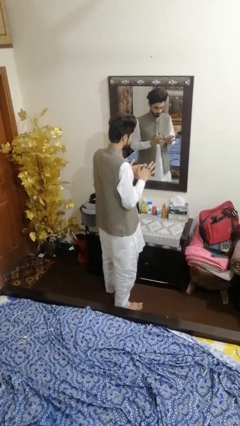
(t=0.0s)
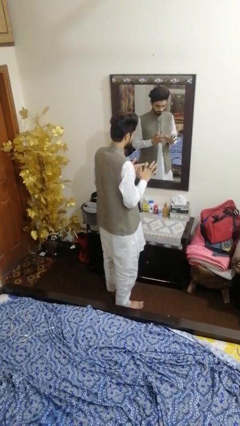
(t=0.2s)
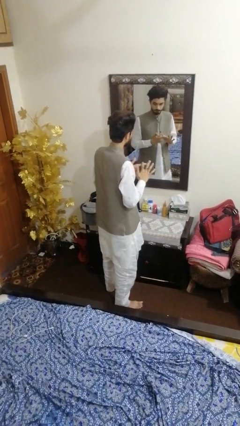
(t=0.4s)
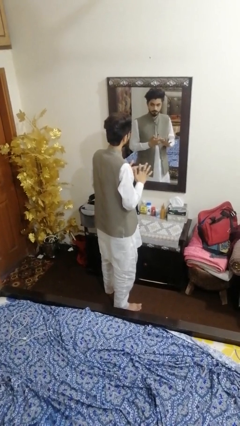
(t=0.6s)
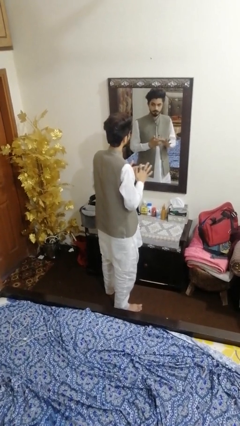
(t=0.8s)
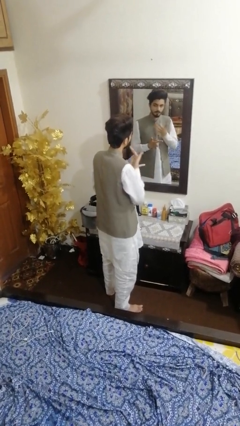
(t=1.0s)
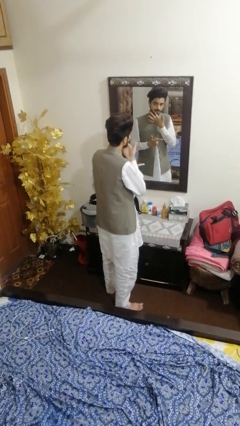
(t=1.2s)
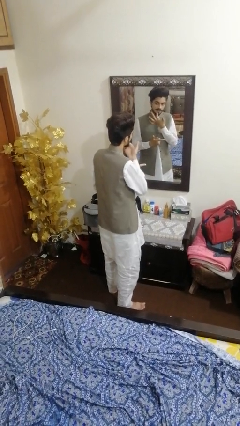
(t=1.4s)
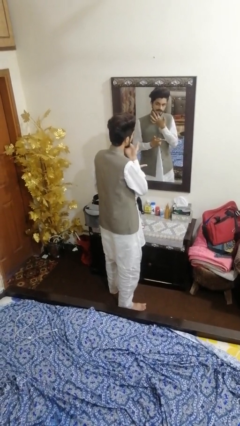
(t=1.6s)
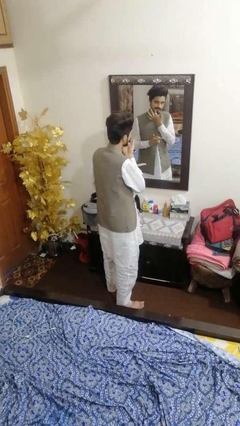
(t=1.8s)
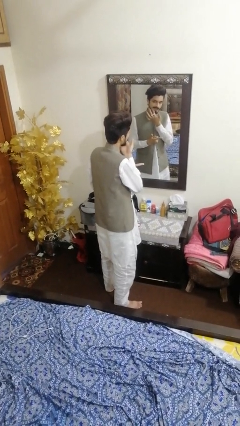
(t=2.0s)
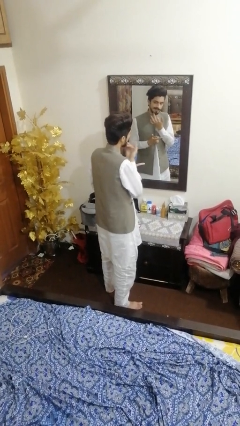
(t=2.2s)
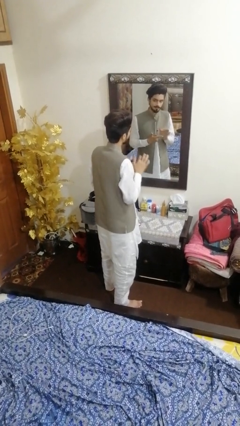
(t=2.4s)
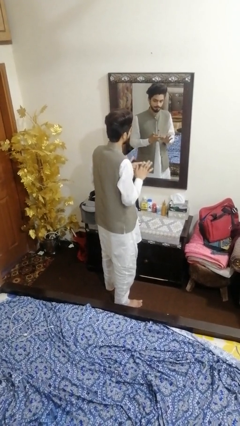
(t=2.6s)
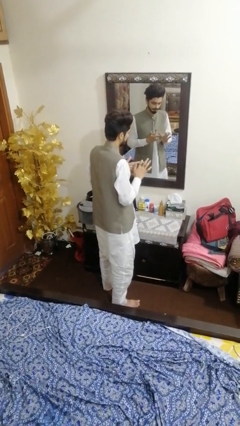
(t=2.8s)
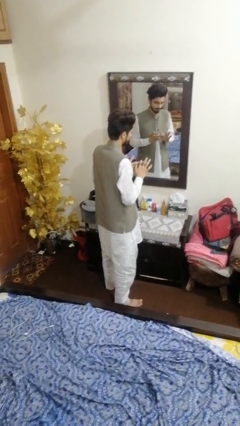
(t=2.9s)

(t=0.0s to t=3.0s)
person applies foundation makeup

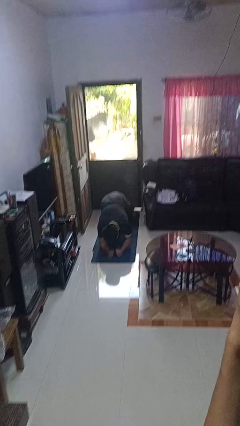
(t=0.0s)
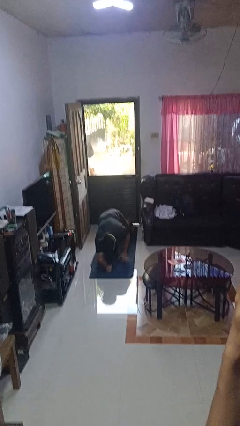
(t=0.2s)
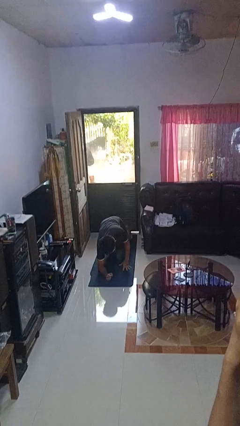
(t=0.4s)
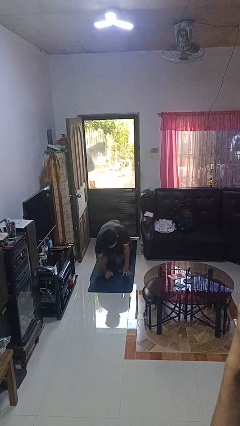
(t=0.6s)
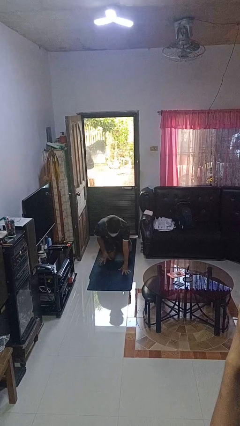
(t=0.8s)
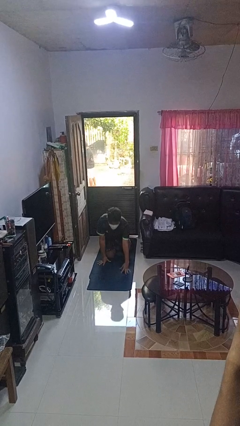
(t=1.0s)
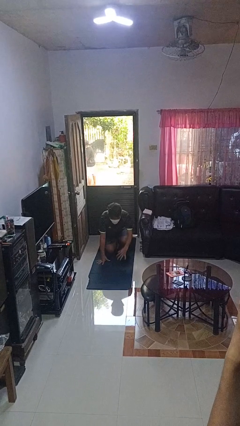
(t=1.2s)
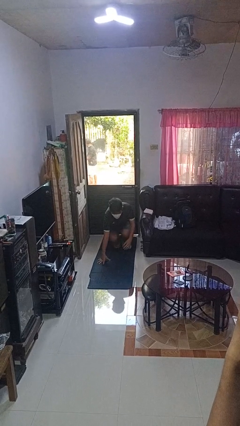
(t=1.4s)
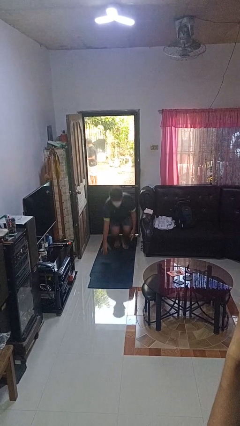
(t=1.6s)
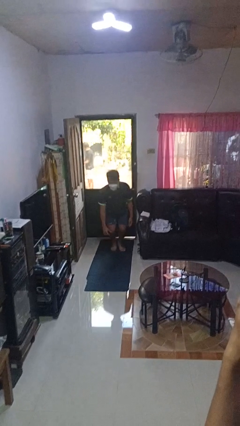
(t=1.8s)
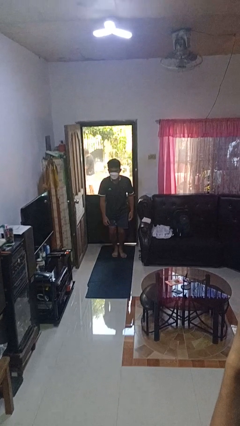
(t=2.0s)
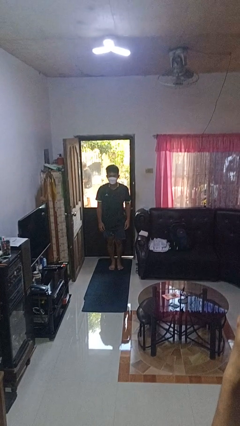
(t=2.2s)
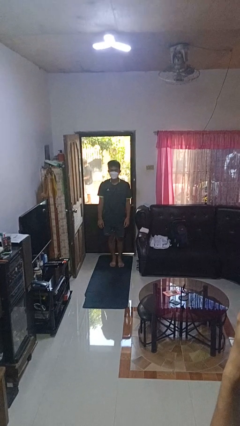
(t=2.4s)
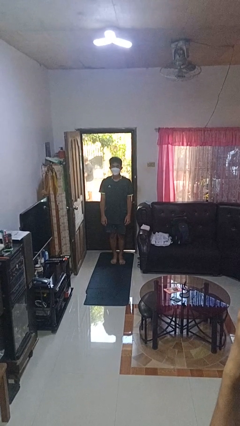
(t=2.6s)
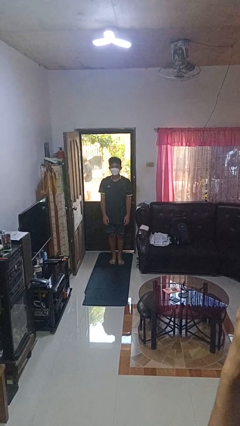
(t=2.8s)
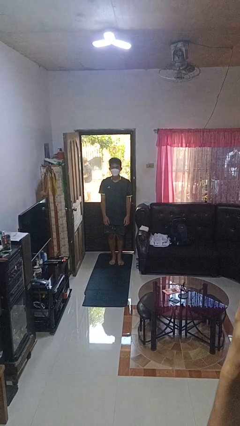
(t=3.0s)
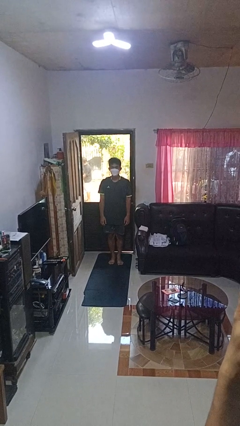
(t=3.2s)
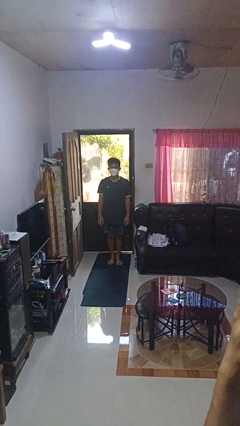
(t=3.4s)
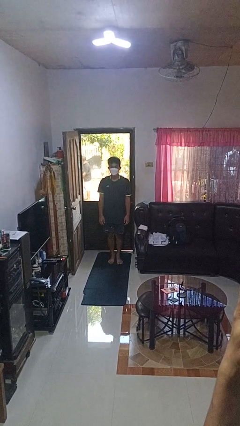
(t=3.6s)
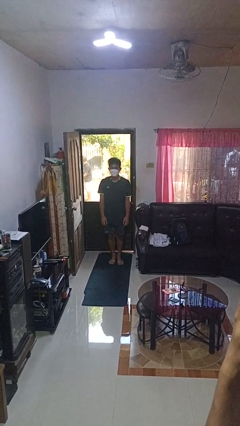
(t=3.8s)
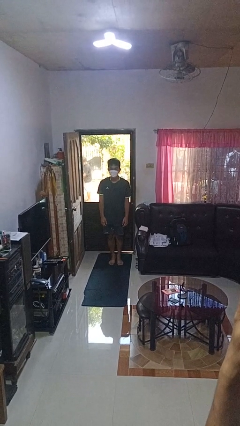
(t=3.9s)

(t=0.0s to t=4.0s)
person stands up from floor

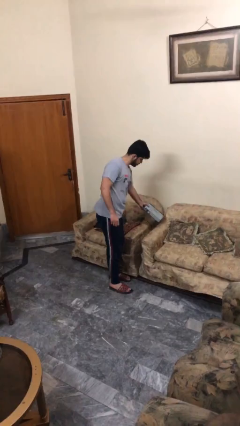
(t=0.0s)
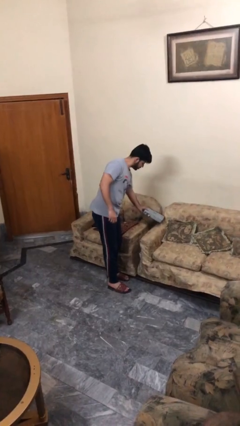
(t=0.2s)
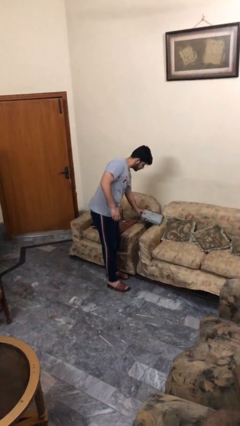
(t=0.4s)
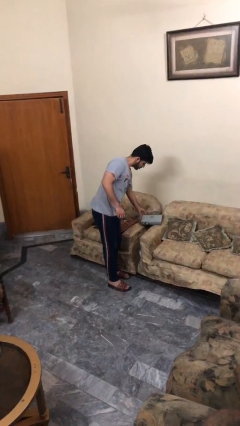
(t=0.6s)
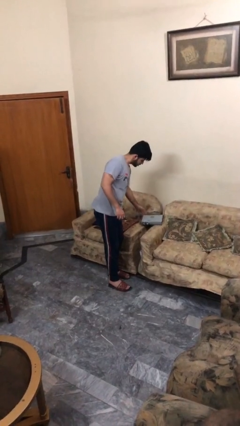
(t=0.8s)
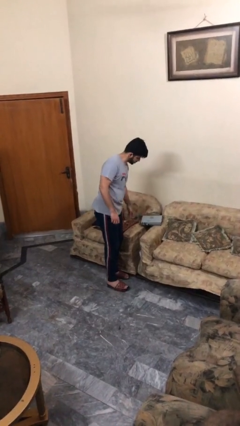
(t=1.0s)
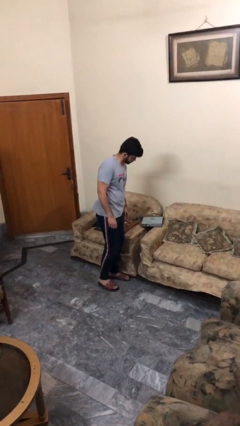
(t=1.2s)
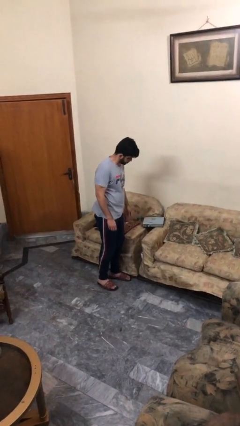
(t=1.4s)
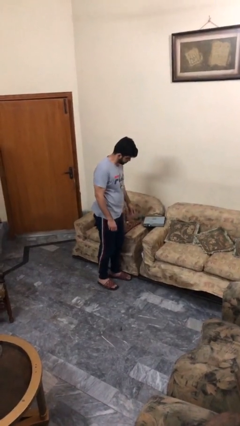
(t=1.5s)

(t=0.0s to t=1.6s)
person puts down object on couch

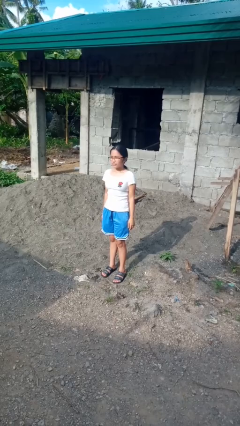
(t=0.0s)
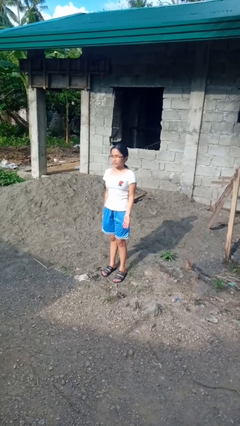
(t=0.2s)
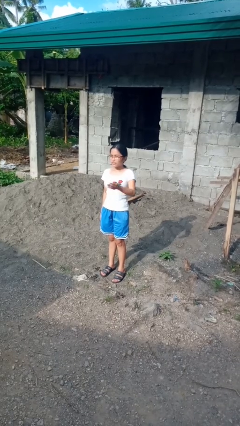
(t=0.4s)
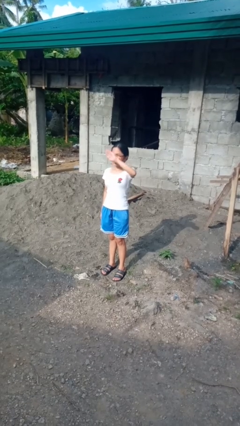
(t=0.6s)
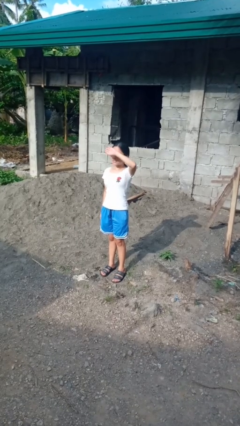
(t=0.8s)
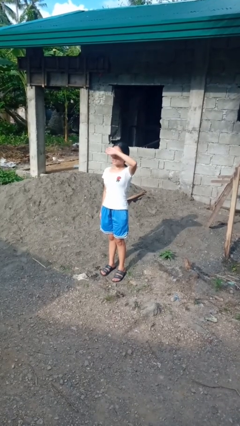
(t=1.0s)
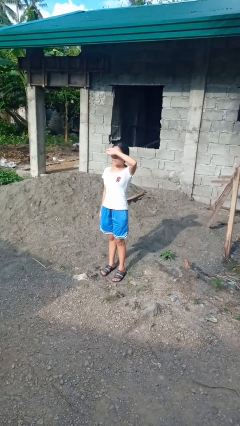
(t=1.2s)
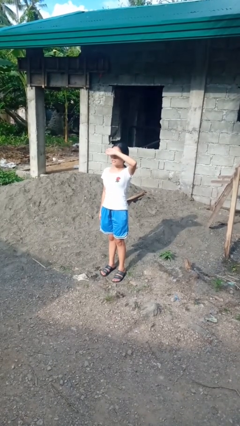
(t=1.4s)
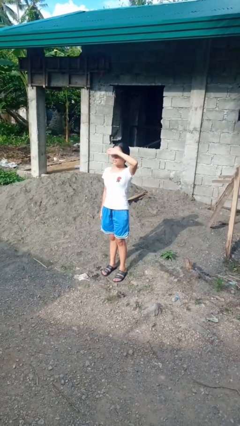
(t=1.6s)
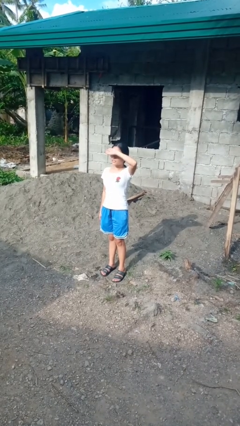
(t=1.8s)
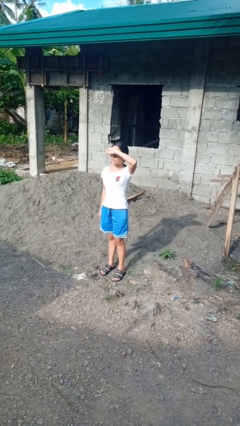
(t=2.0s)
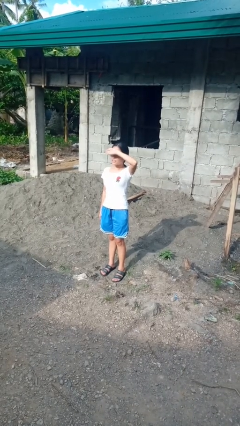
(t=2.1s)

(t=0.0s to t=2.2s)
person shades eyes

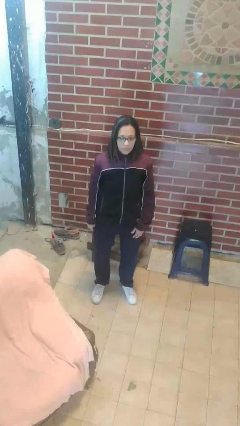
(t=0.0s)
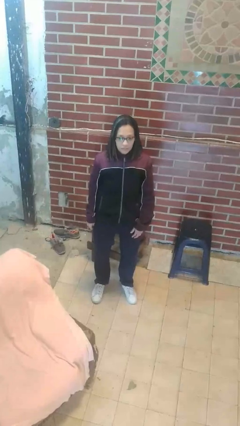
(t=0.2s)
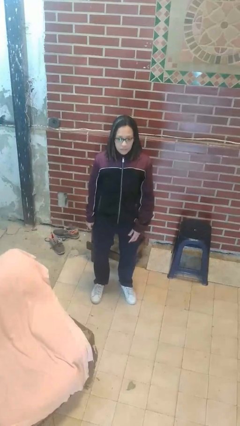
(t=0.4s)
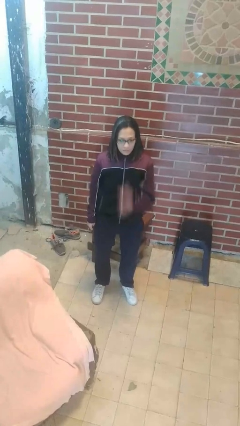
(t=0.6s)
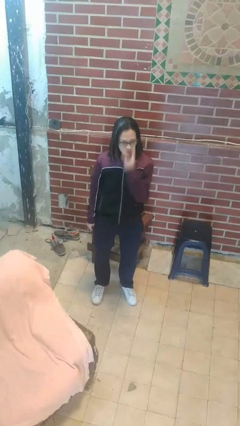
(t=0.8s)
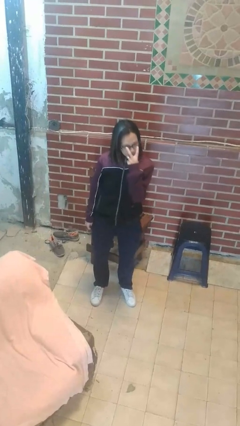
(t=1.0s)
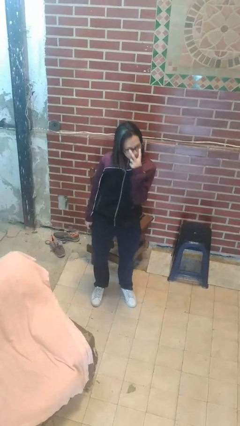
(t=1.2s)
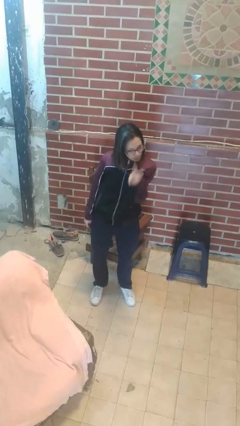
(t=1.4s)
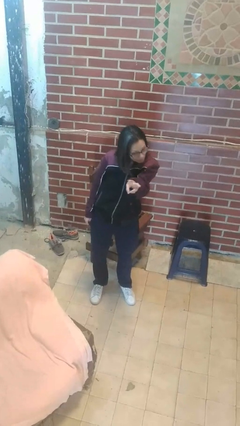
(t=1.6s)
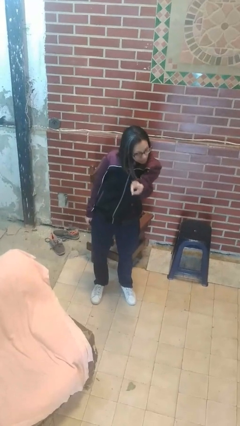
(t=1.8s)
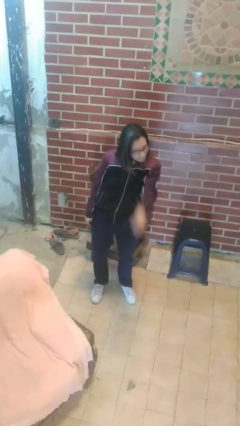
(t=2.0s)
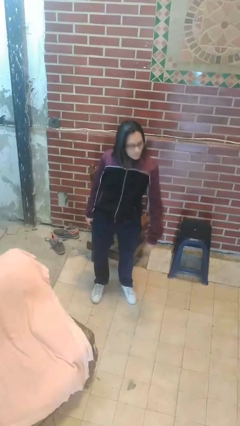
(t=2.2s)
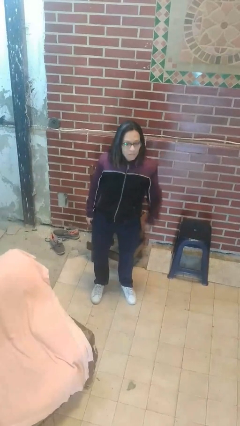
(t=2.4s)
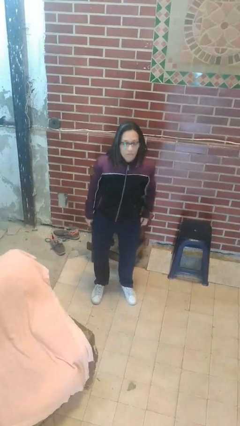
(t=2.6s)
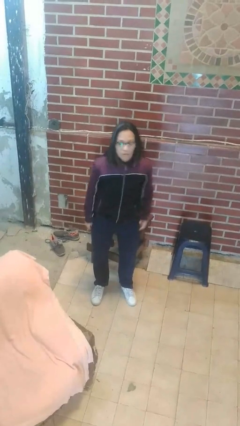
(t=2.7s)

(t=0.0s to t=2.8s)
person gestures watch closely

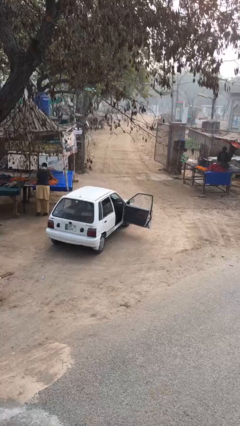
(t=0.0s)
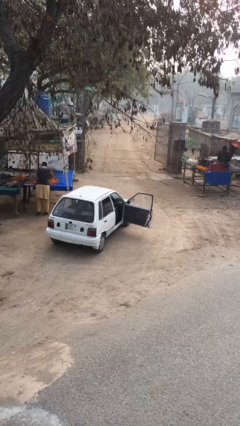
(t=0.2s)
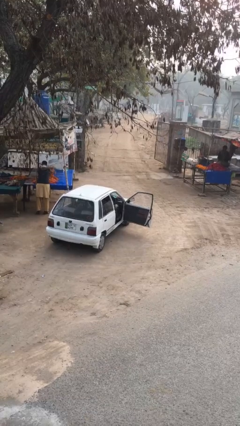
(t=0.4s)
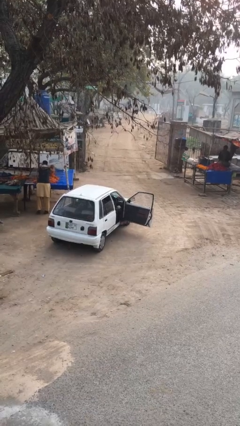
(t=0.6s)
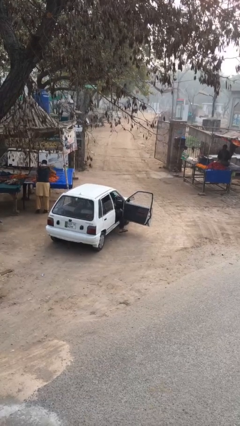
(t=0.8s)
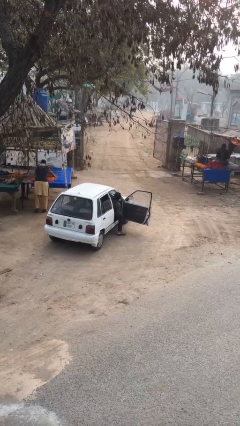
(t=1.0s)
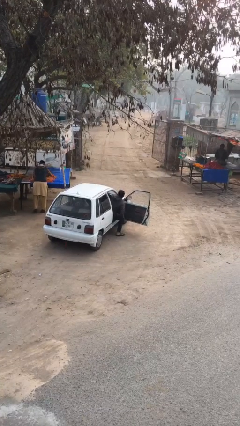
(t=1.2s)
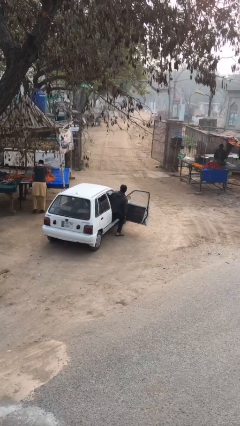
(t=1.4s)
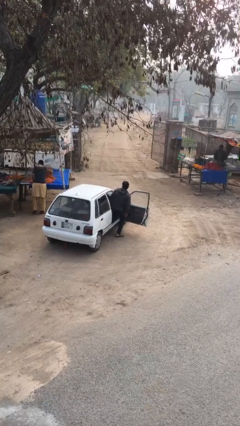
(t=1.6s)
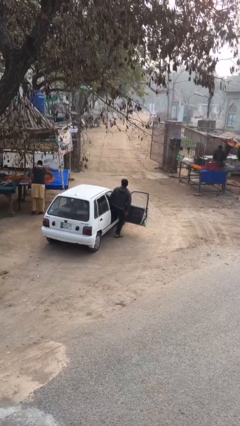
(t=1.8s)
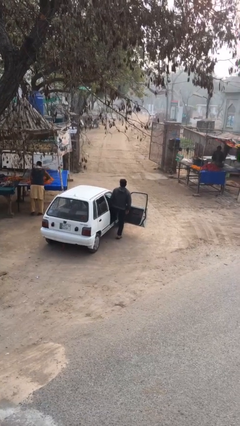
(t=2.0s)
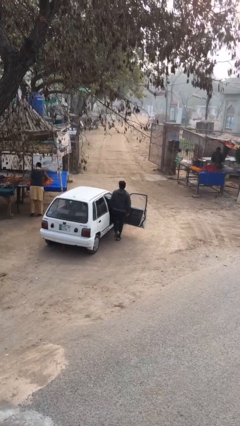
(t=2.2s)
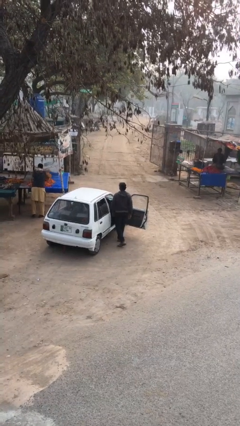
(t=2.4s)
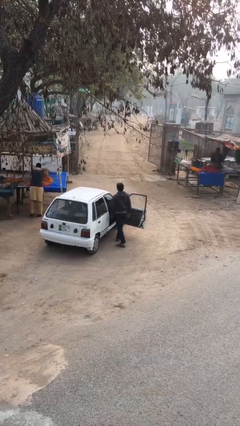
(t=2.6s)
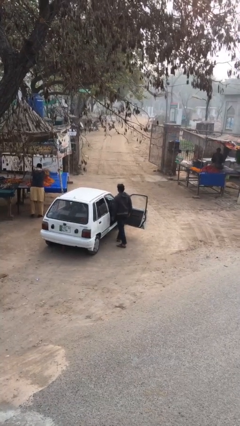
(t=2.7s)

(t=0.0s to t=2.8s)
person exits car

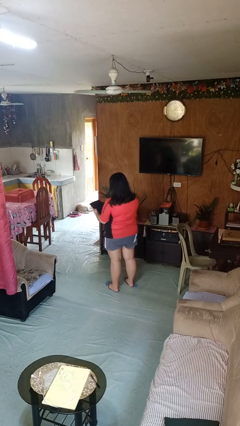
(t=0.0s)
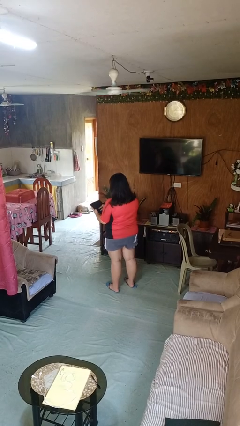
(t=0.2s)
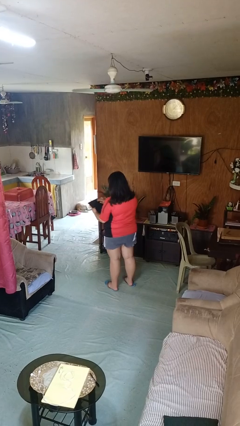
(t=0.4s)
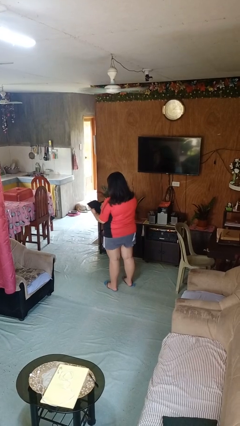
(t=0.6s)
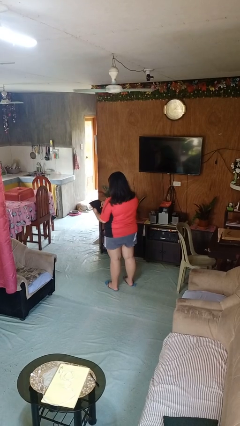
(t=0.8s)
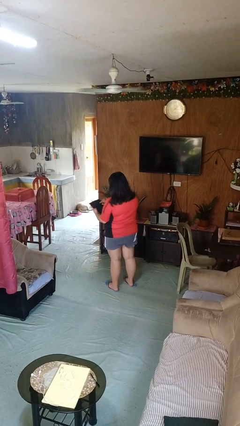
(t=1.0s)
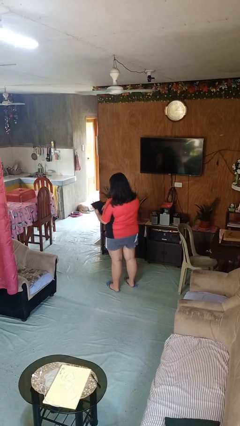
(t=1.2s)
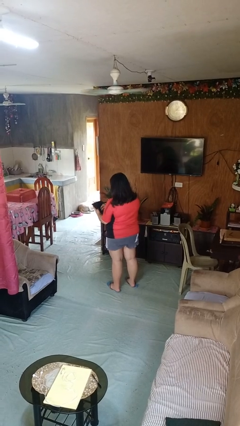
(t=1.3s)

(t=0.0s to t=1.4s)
person interacts with tablet
